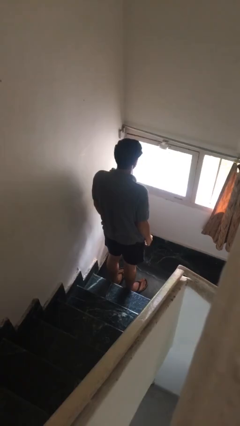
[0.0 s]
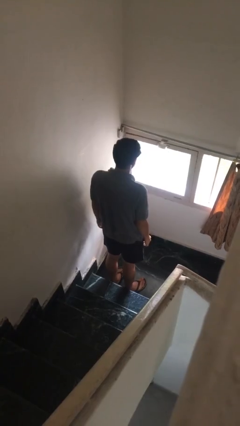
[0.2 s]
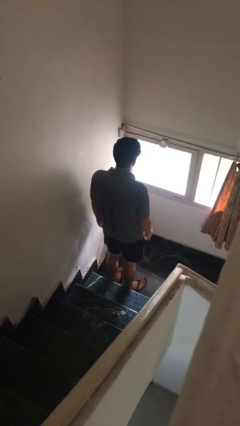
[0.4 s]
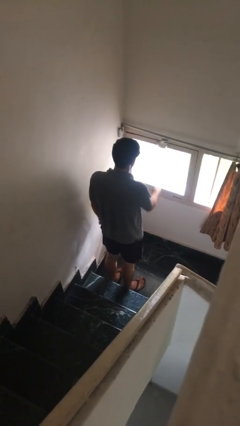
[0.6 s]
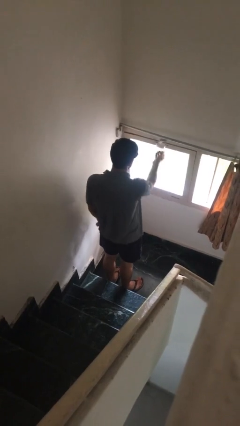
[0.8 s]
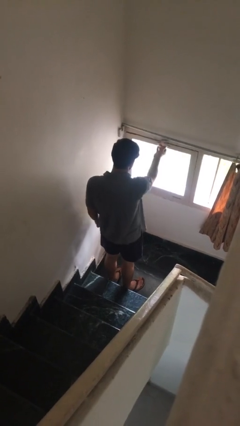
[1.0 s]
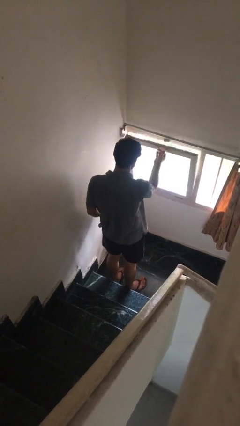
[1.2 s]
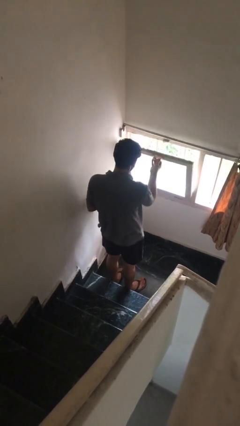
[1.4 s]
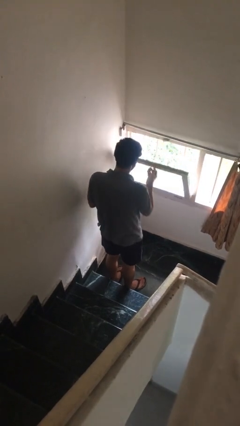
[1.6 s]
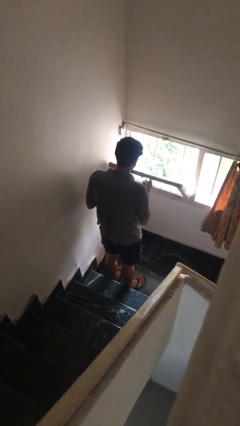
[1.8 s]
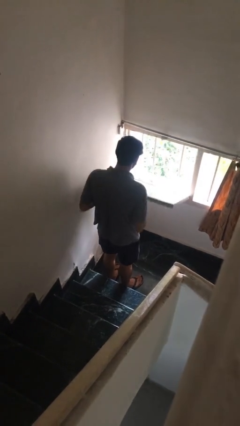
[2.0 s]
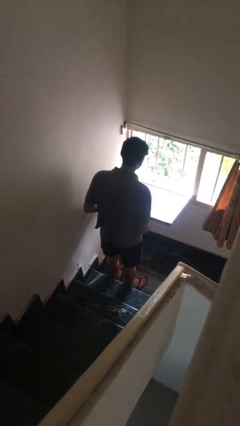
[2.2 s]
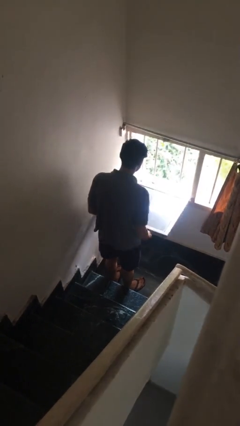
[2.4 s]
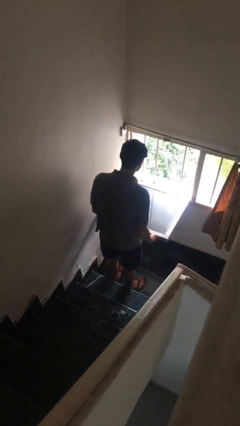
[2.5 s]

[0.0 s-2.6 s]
person opens home window

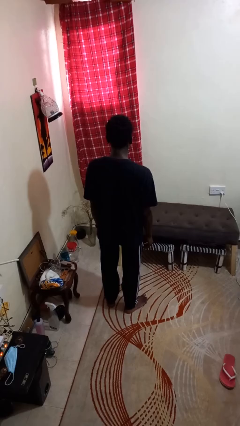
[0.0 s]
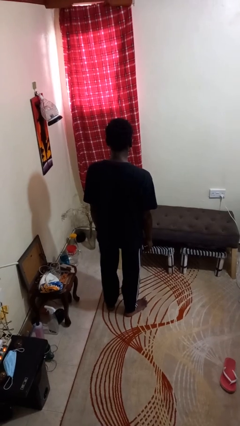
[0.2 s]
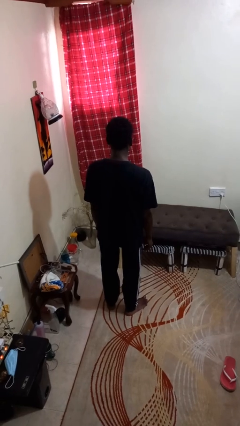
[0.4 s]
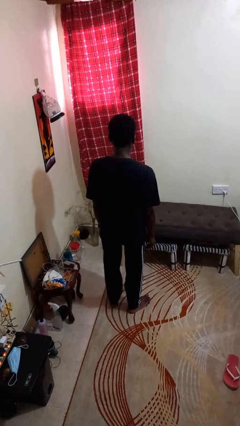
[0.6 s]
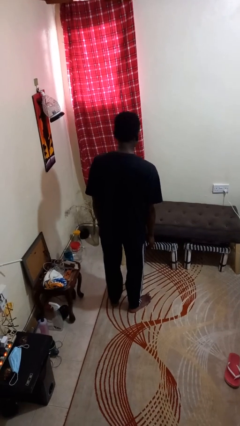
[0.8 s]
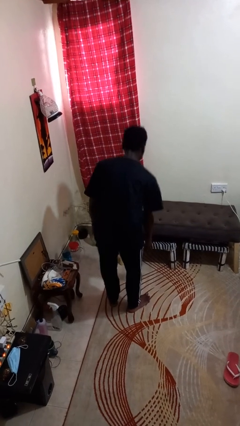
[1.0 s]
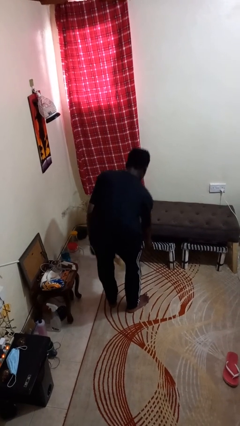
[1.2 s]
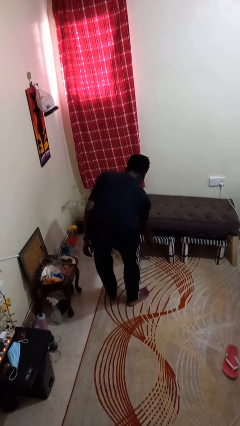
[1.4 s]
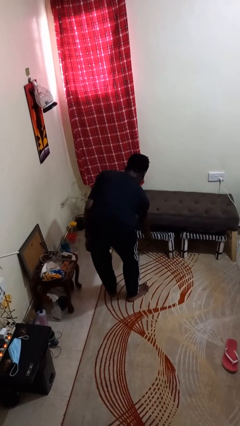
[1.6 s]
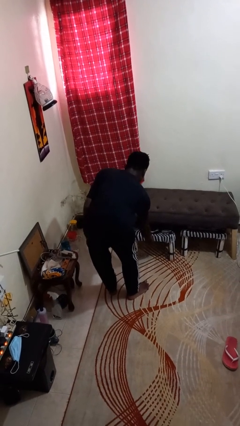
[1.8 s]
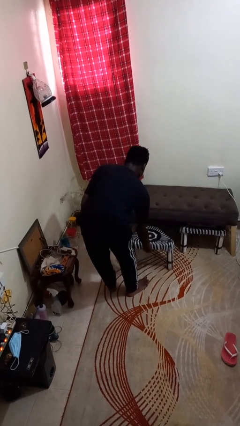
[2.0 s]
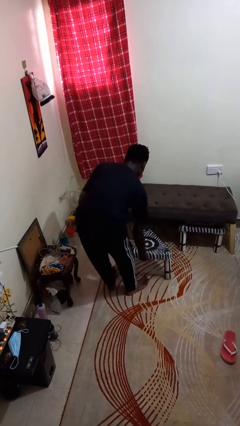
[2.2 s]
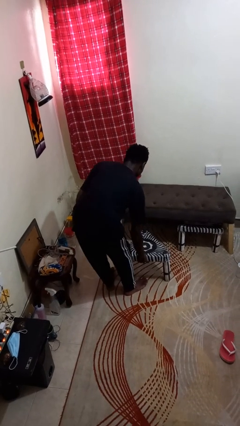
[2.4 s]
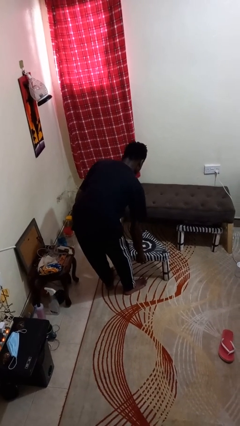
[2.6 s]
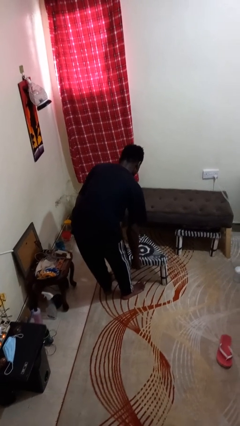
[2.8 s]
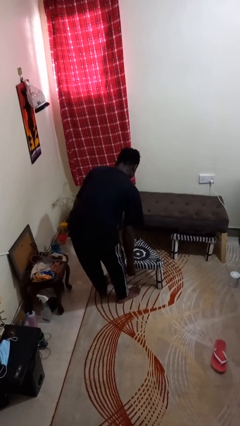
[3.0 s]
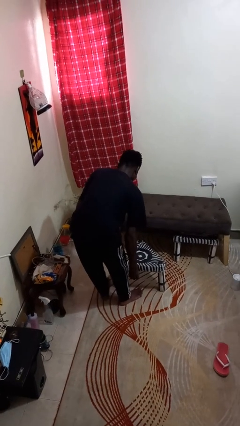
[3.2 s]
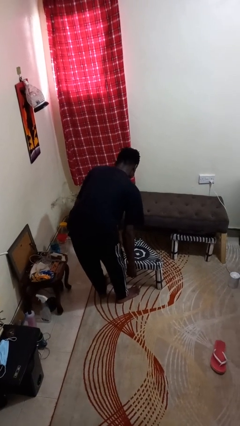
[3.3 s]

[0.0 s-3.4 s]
person pulls out chair

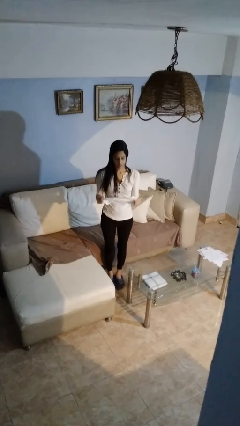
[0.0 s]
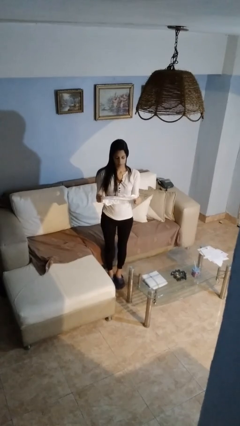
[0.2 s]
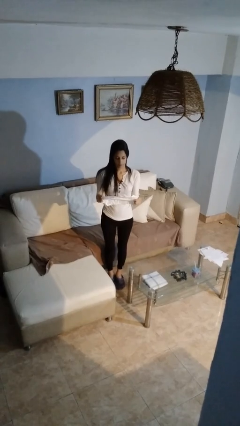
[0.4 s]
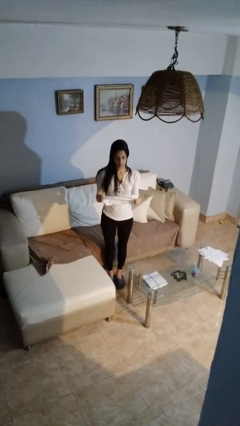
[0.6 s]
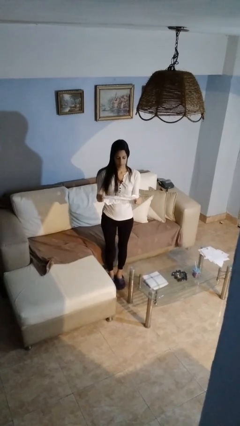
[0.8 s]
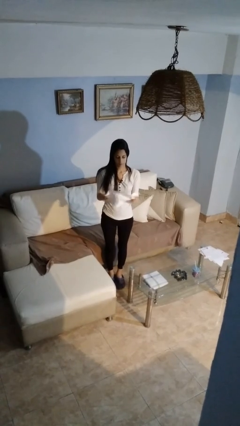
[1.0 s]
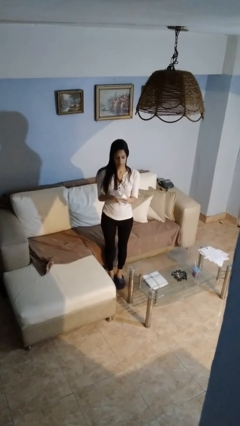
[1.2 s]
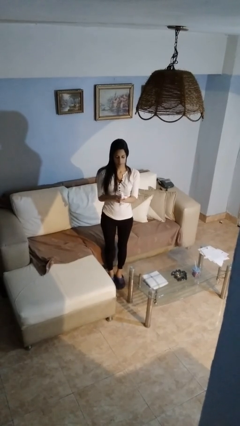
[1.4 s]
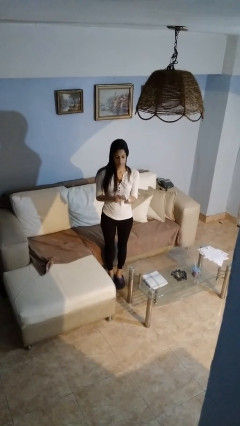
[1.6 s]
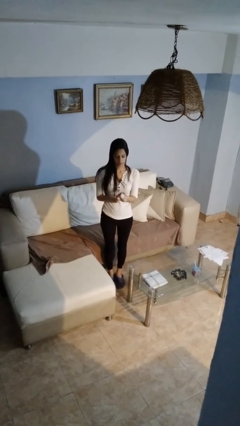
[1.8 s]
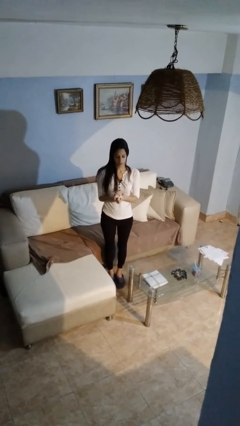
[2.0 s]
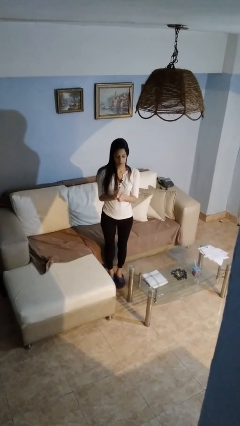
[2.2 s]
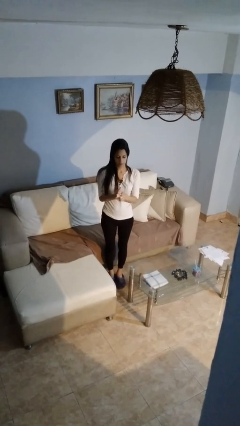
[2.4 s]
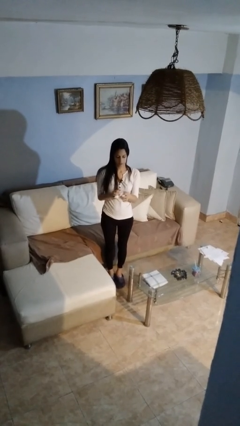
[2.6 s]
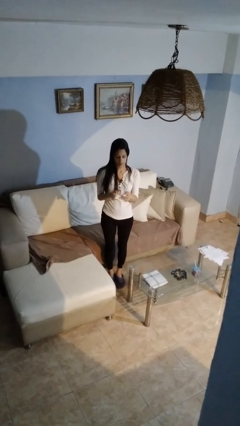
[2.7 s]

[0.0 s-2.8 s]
person crumples paper

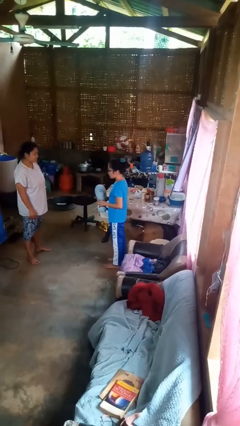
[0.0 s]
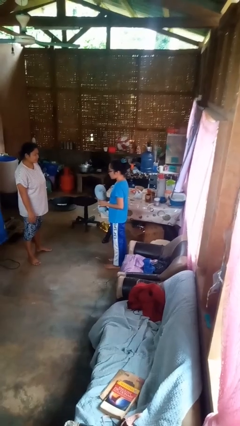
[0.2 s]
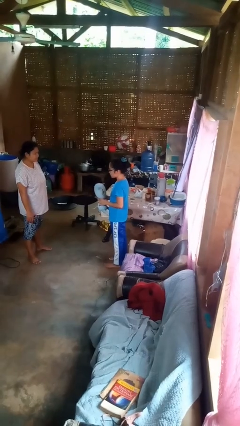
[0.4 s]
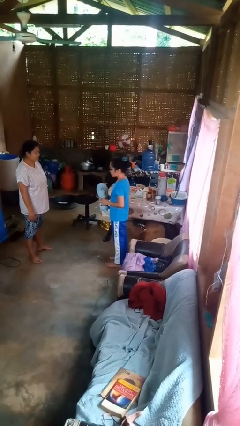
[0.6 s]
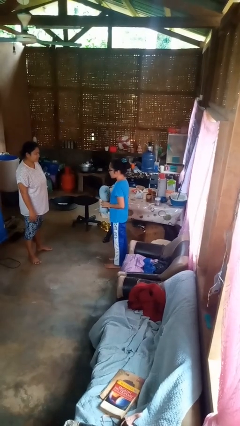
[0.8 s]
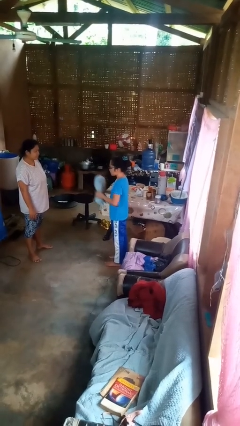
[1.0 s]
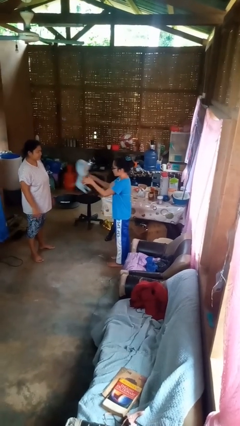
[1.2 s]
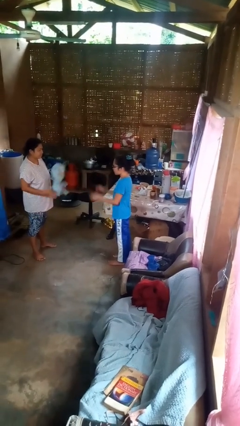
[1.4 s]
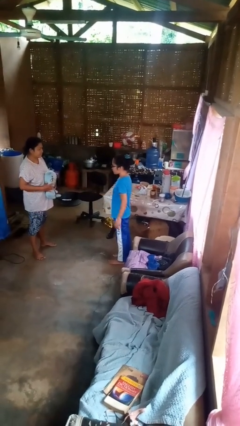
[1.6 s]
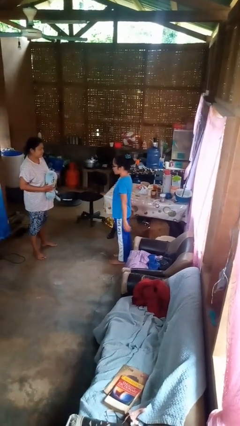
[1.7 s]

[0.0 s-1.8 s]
person throws object to person

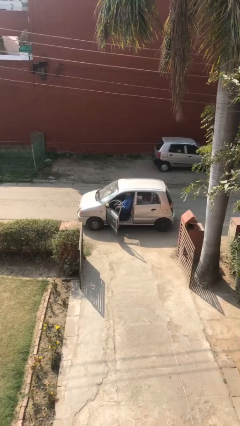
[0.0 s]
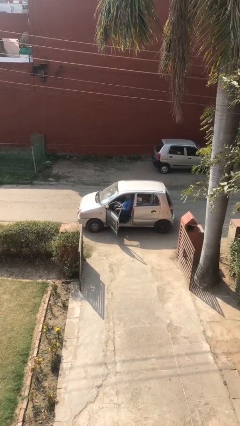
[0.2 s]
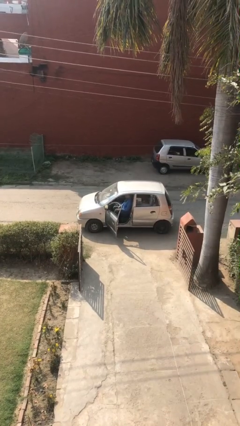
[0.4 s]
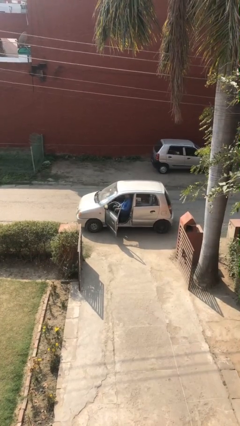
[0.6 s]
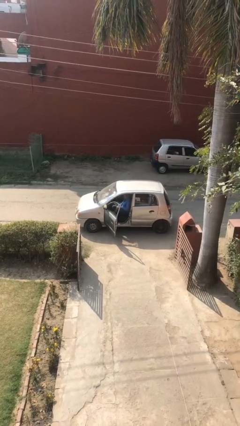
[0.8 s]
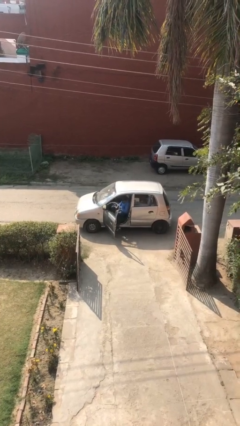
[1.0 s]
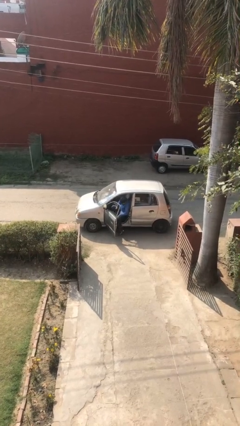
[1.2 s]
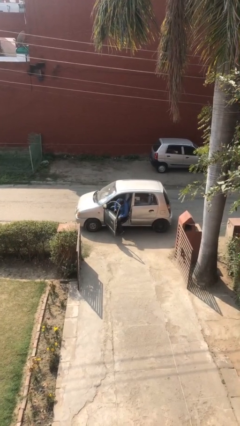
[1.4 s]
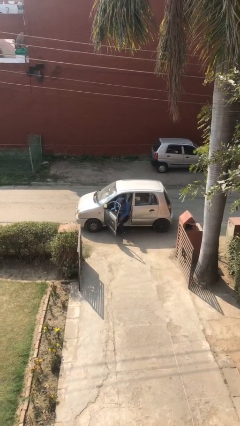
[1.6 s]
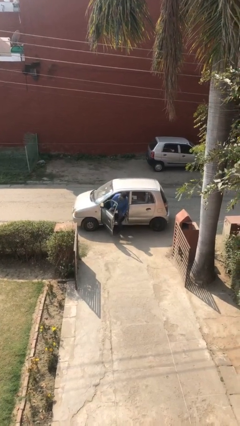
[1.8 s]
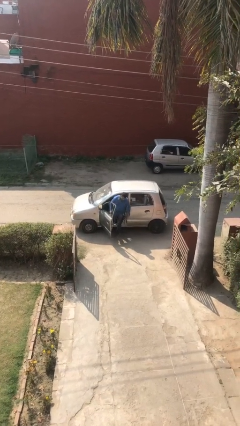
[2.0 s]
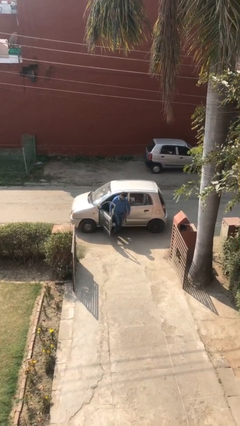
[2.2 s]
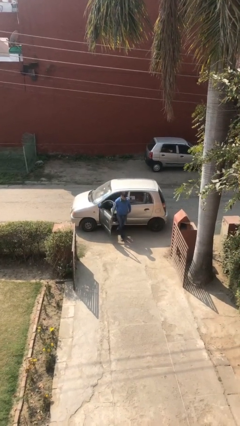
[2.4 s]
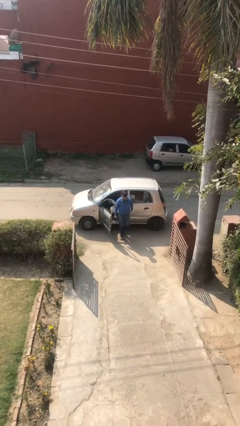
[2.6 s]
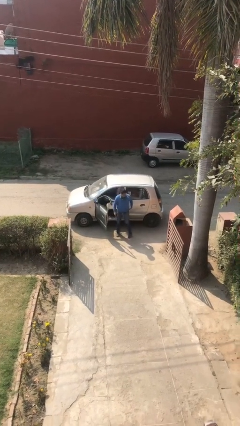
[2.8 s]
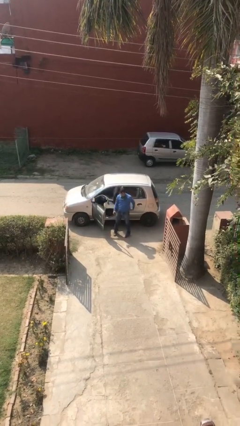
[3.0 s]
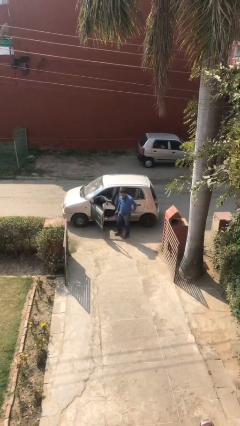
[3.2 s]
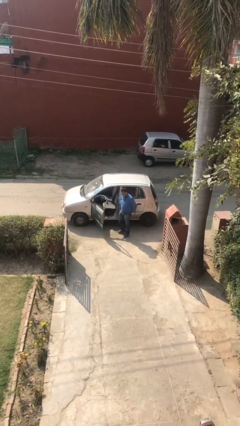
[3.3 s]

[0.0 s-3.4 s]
person exits car

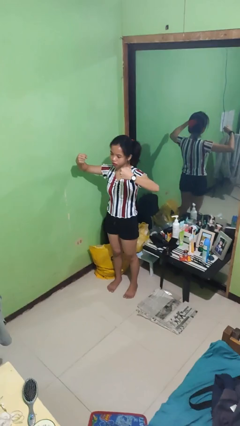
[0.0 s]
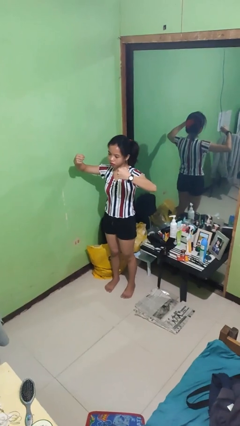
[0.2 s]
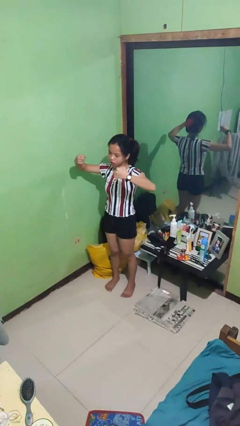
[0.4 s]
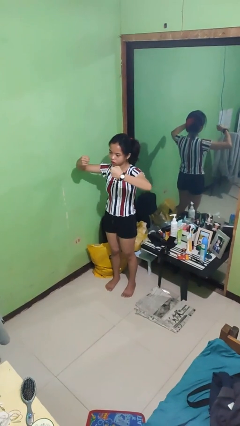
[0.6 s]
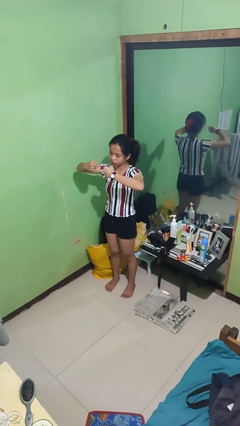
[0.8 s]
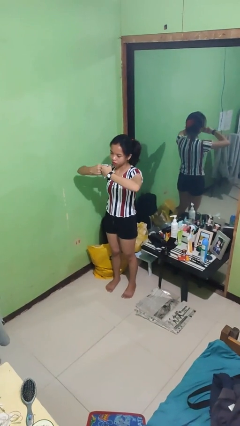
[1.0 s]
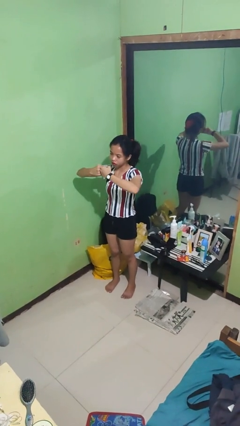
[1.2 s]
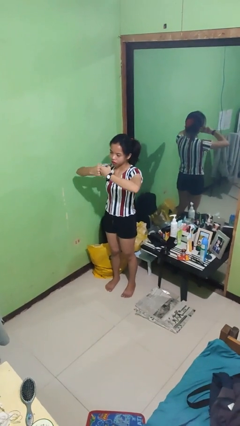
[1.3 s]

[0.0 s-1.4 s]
person gestures zoom out

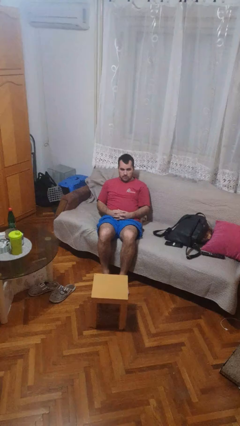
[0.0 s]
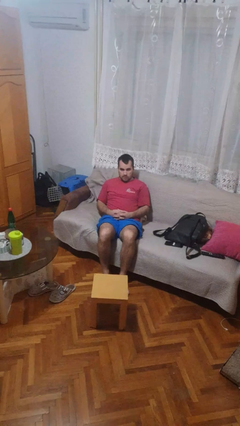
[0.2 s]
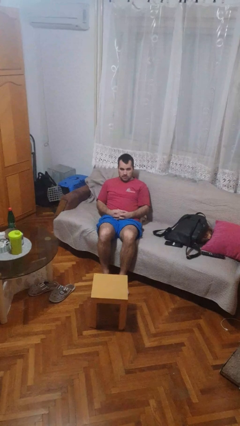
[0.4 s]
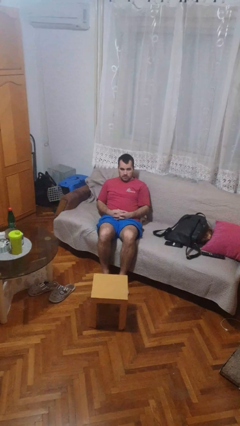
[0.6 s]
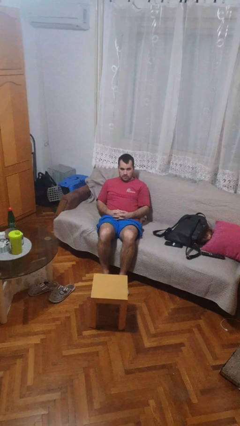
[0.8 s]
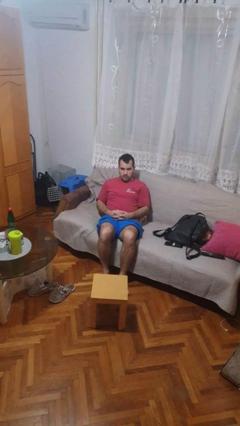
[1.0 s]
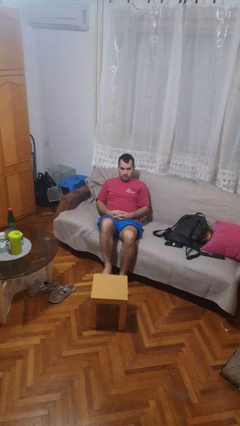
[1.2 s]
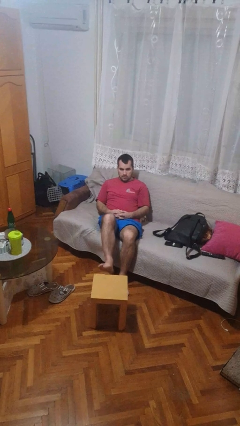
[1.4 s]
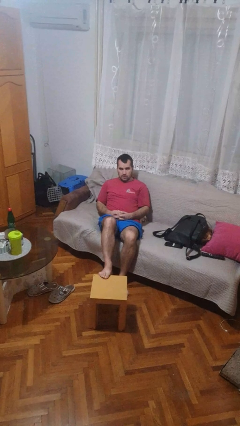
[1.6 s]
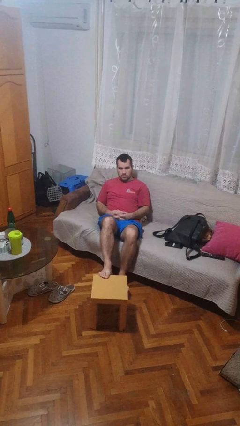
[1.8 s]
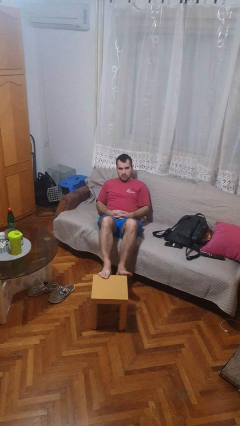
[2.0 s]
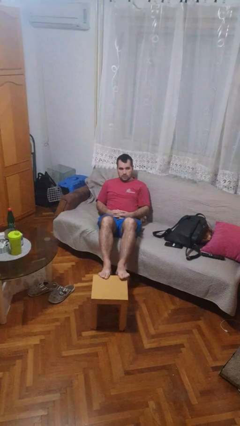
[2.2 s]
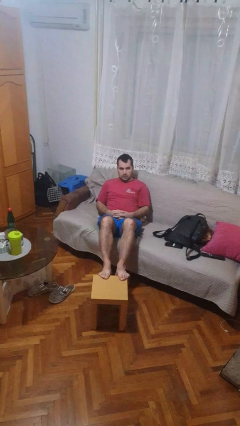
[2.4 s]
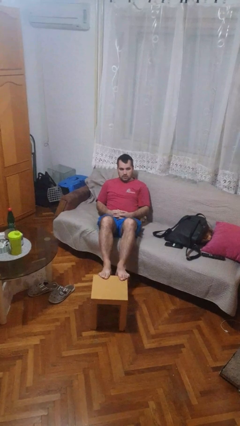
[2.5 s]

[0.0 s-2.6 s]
person puts feet up
